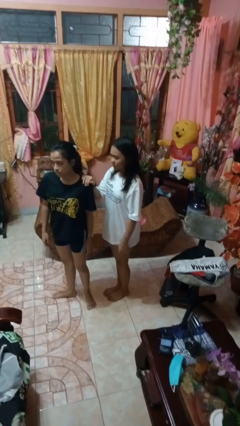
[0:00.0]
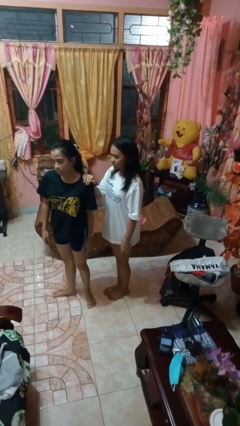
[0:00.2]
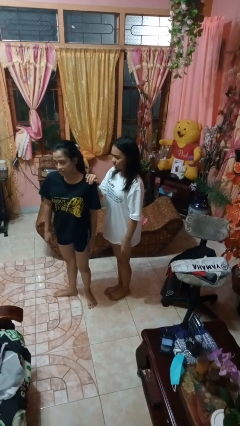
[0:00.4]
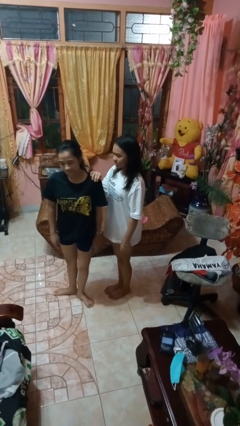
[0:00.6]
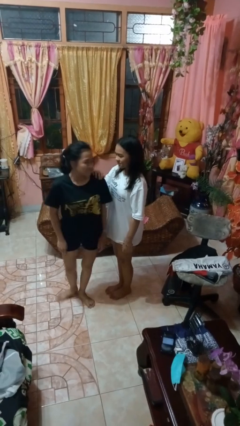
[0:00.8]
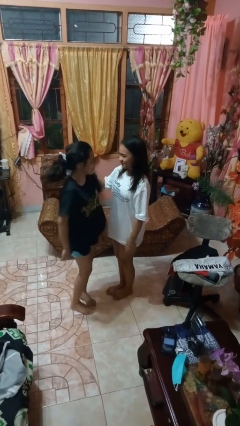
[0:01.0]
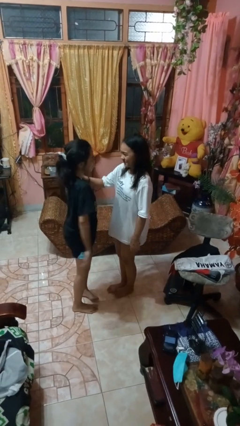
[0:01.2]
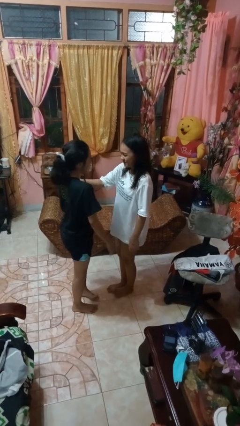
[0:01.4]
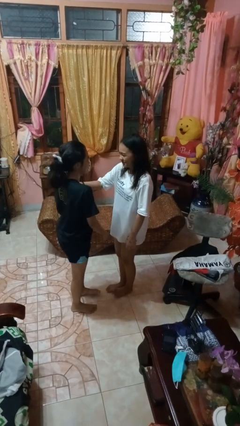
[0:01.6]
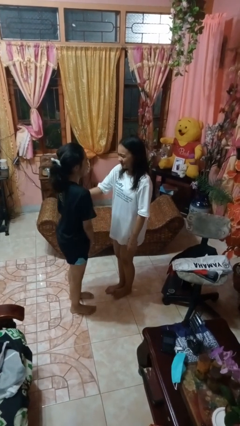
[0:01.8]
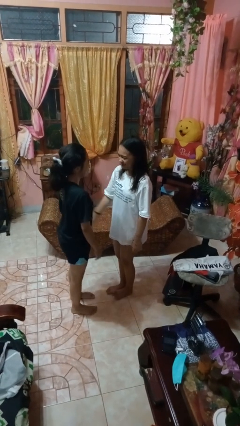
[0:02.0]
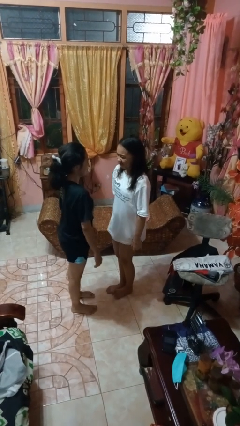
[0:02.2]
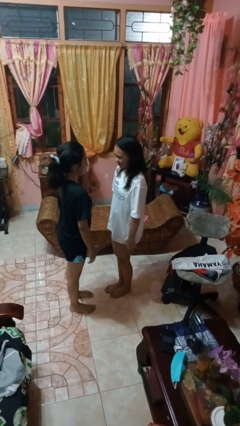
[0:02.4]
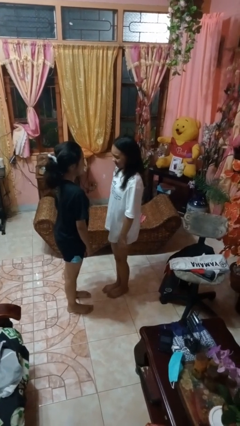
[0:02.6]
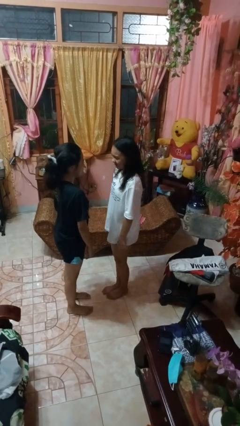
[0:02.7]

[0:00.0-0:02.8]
person spins person around

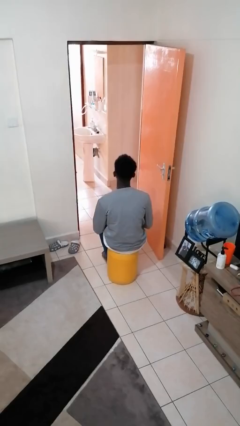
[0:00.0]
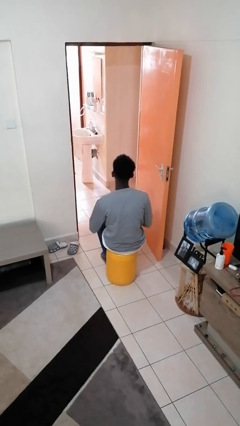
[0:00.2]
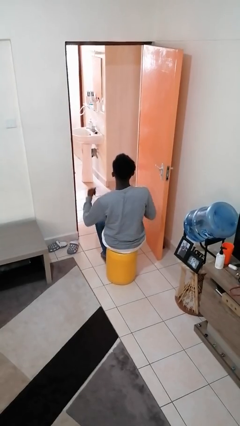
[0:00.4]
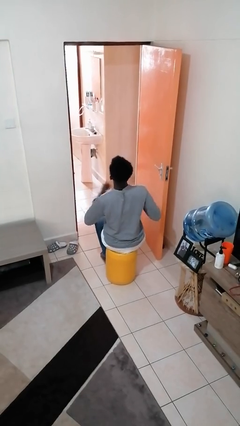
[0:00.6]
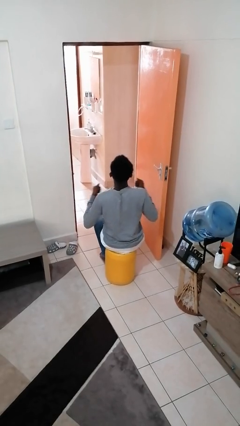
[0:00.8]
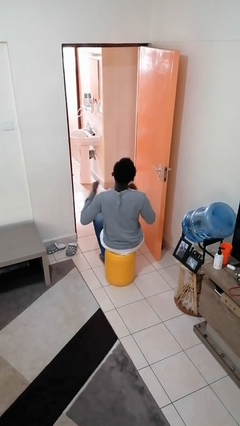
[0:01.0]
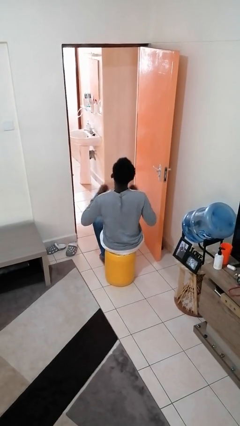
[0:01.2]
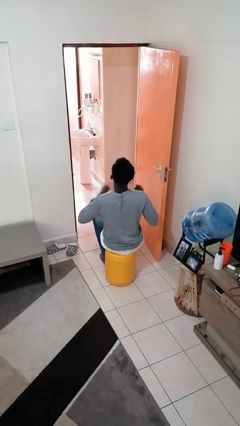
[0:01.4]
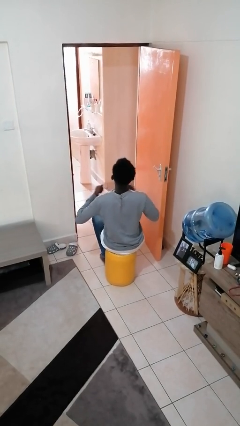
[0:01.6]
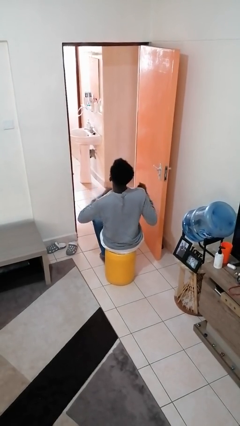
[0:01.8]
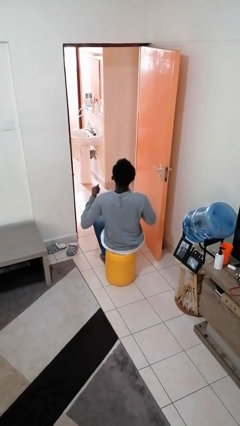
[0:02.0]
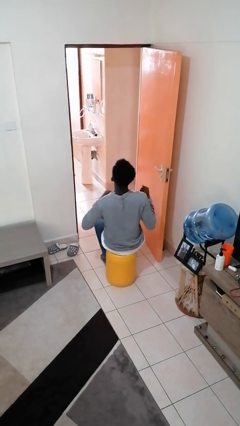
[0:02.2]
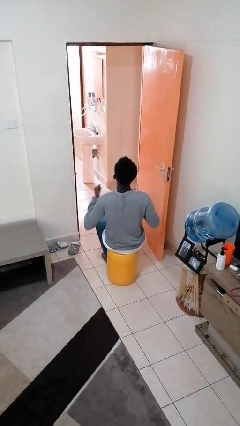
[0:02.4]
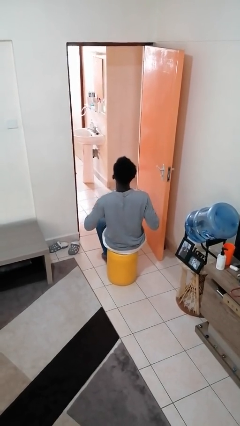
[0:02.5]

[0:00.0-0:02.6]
person drums on chest

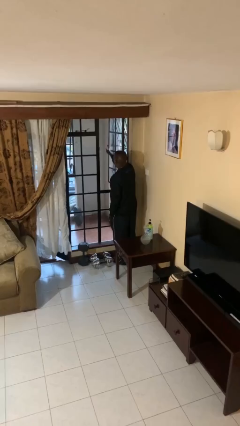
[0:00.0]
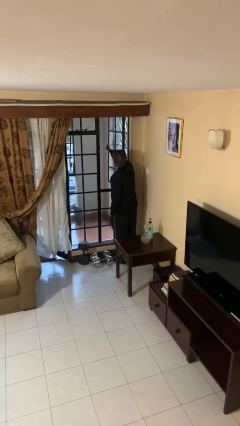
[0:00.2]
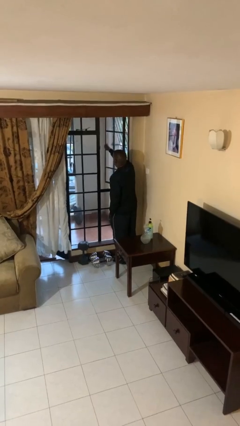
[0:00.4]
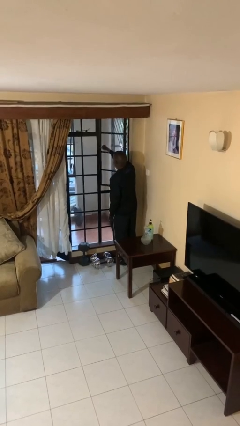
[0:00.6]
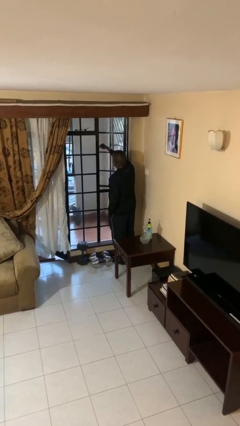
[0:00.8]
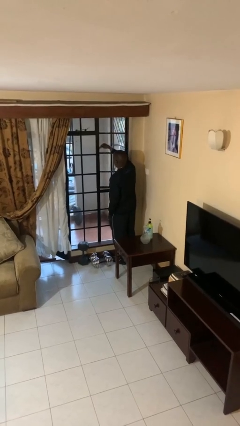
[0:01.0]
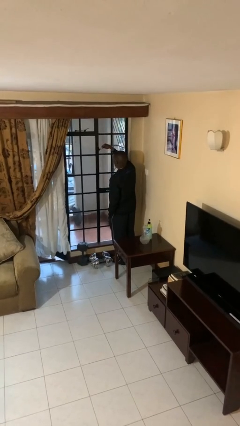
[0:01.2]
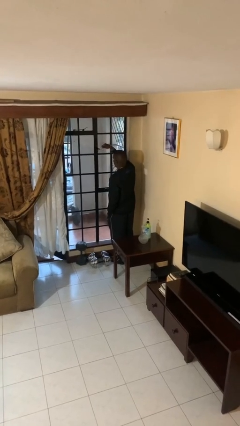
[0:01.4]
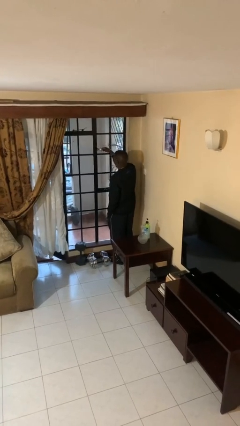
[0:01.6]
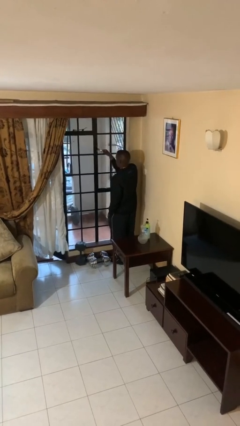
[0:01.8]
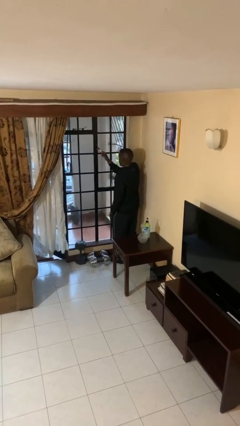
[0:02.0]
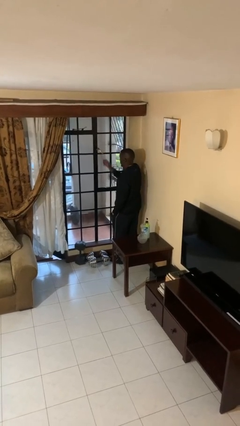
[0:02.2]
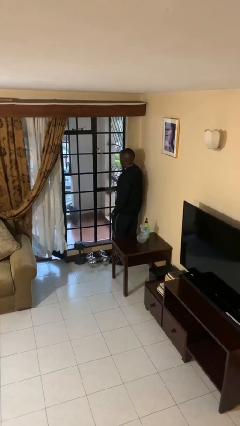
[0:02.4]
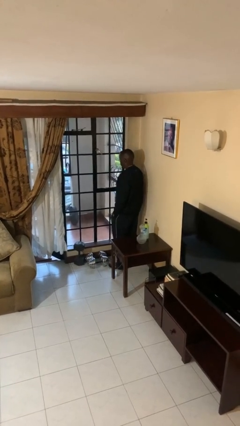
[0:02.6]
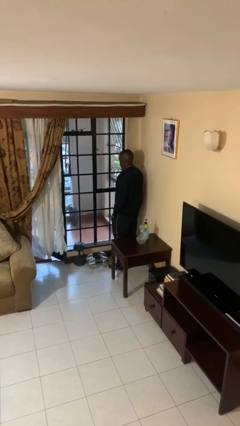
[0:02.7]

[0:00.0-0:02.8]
person closes home window

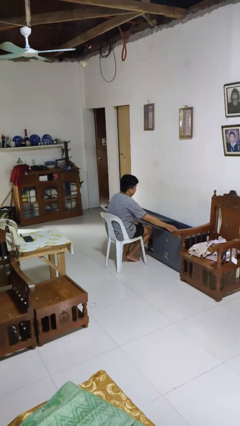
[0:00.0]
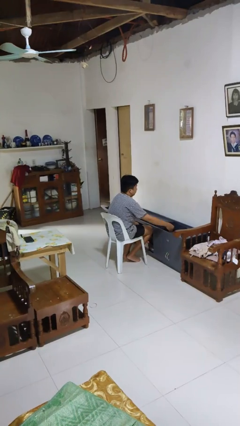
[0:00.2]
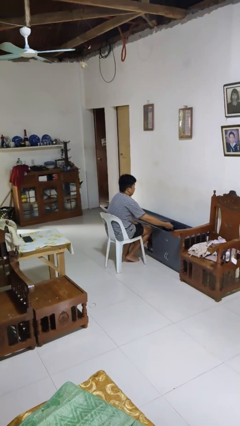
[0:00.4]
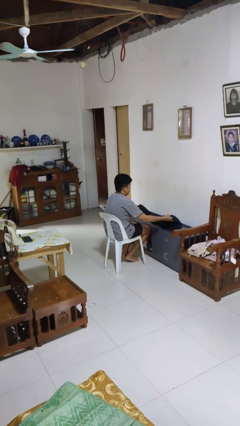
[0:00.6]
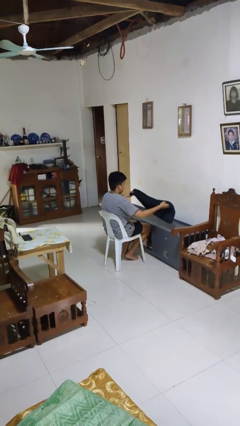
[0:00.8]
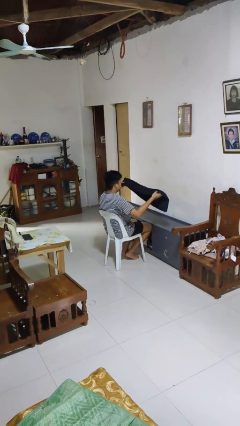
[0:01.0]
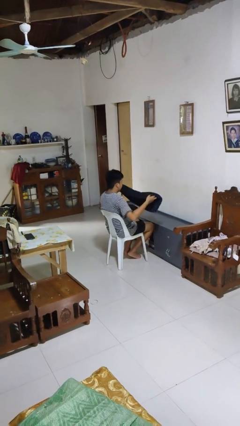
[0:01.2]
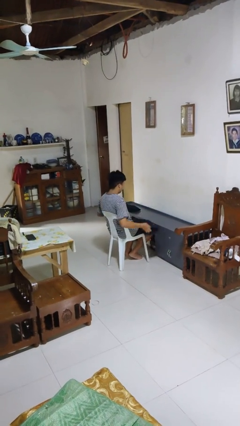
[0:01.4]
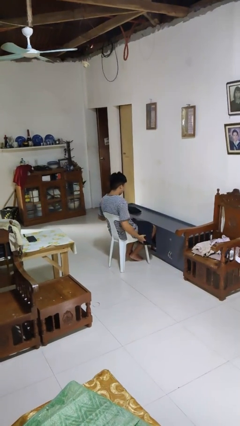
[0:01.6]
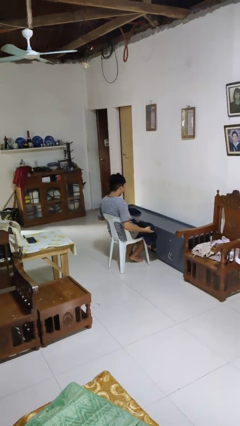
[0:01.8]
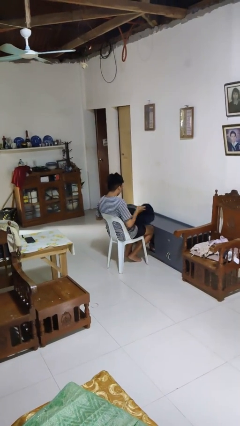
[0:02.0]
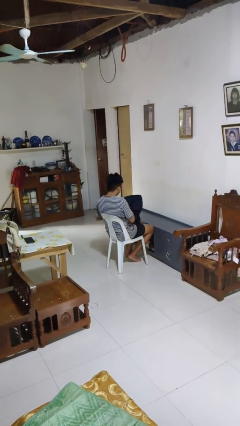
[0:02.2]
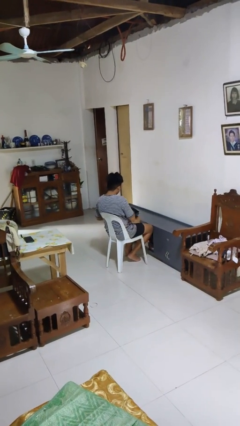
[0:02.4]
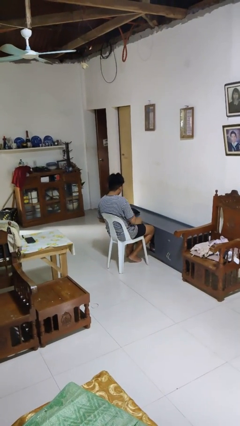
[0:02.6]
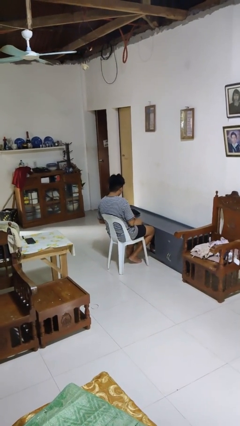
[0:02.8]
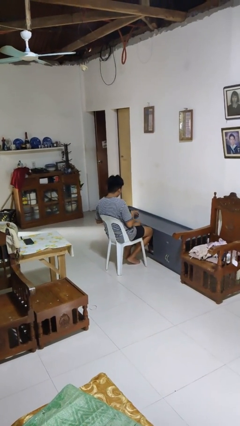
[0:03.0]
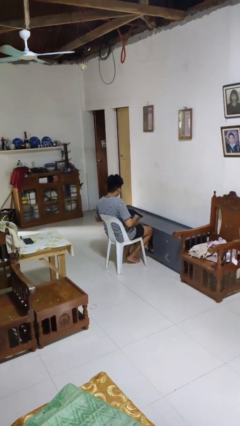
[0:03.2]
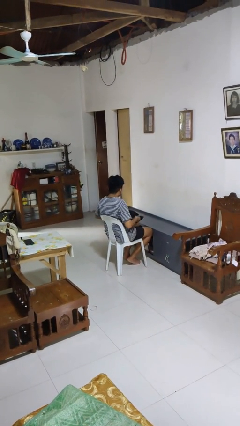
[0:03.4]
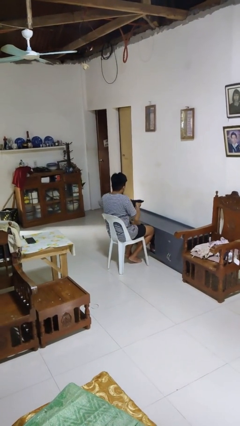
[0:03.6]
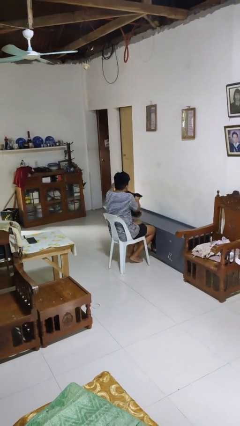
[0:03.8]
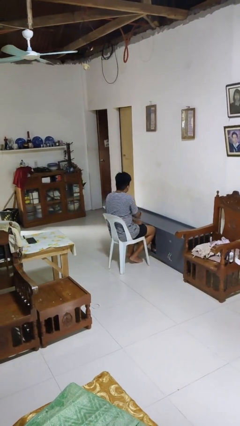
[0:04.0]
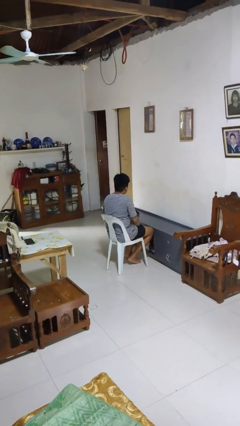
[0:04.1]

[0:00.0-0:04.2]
person folds pants

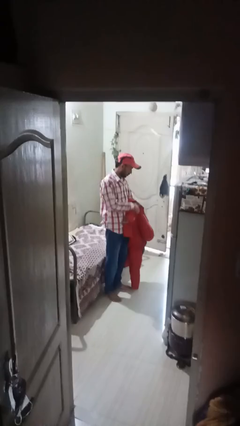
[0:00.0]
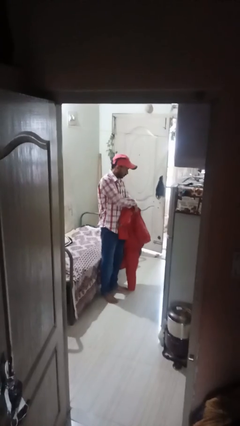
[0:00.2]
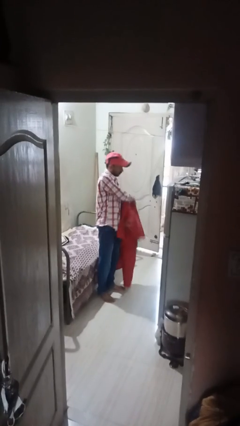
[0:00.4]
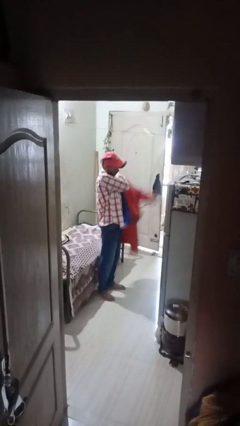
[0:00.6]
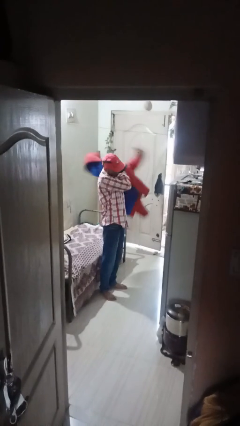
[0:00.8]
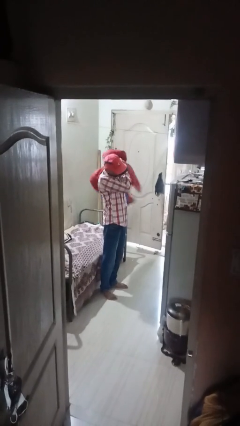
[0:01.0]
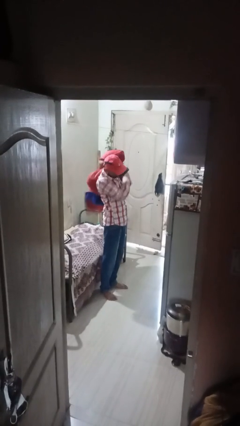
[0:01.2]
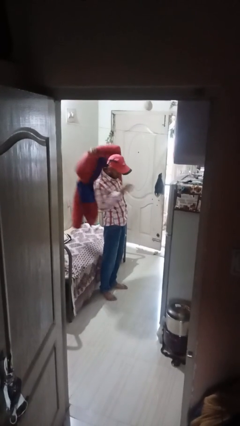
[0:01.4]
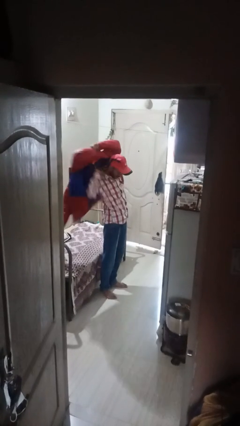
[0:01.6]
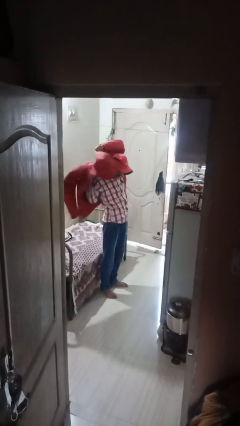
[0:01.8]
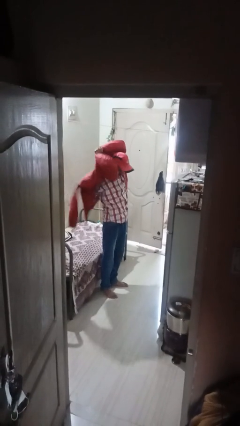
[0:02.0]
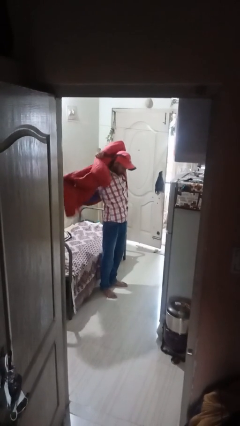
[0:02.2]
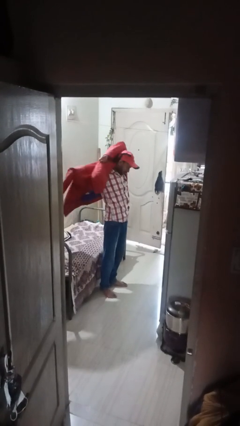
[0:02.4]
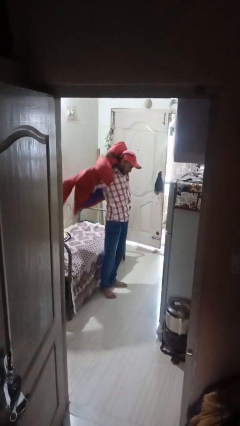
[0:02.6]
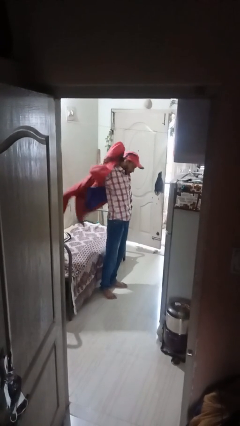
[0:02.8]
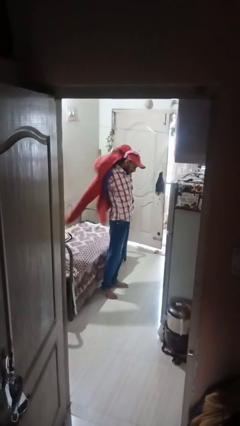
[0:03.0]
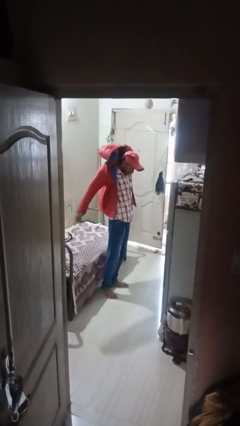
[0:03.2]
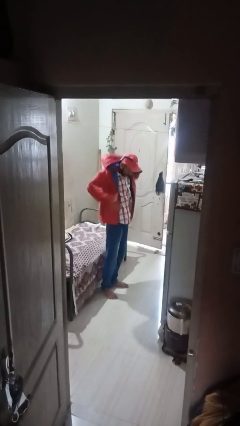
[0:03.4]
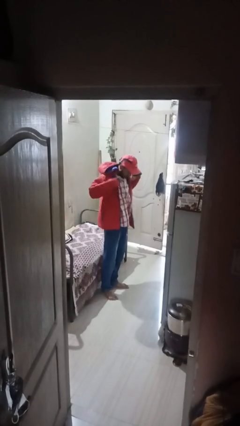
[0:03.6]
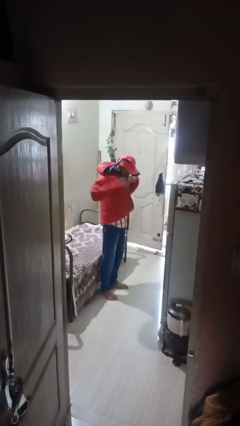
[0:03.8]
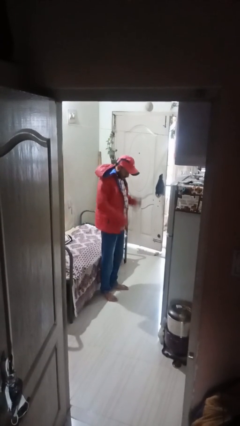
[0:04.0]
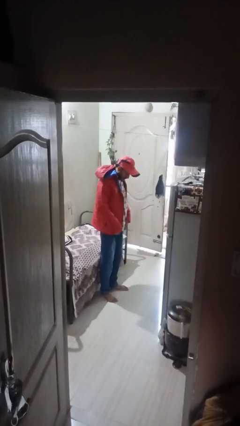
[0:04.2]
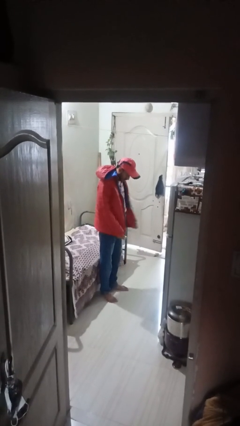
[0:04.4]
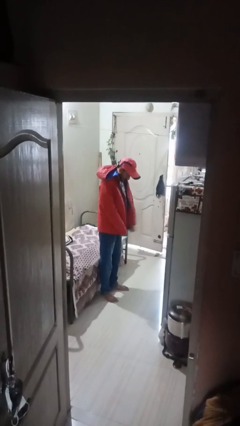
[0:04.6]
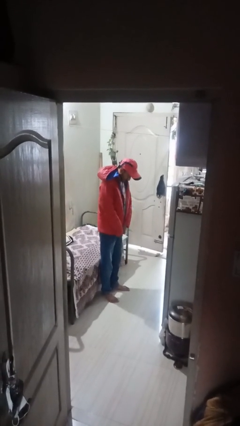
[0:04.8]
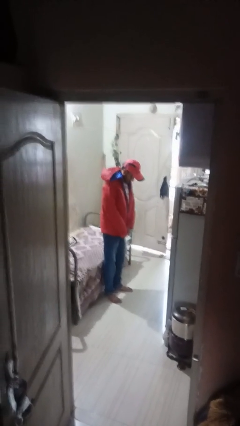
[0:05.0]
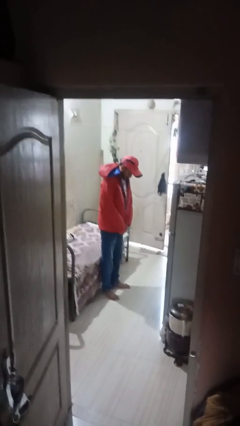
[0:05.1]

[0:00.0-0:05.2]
person puts on jacket
